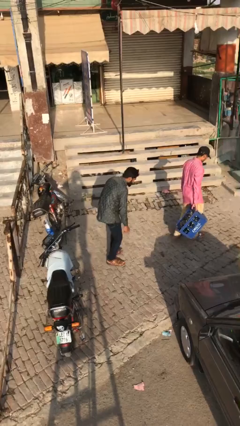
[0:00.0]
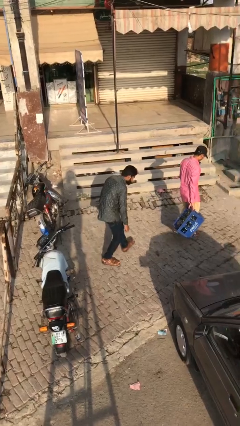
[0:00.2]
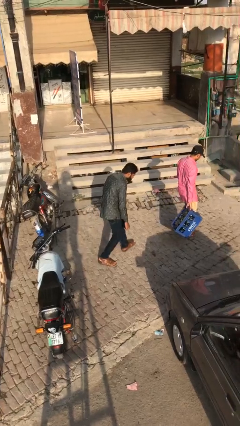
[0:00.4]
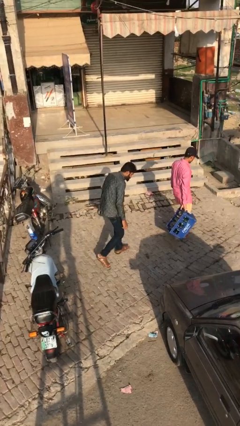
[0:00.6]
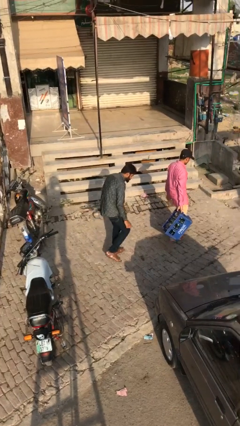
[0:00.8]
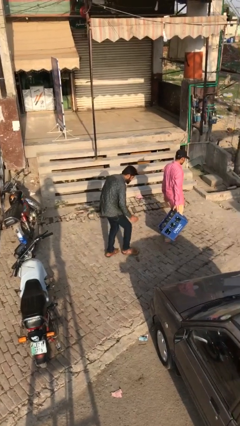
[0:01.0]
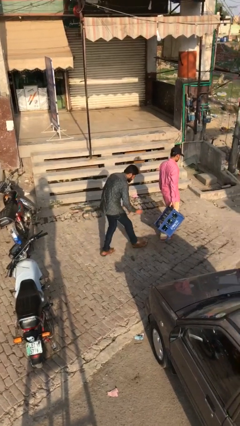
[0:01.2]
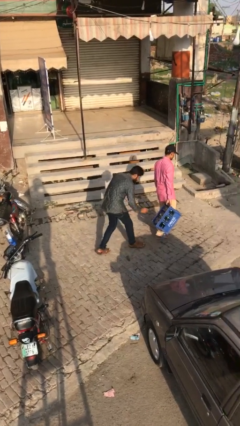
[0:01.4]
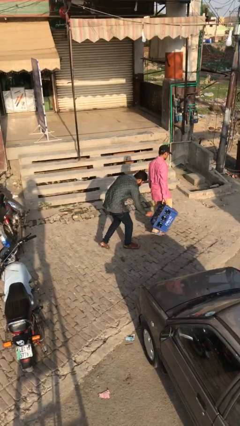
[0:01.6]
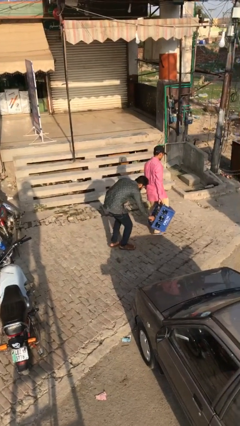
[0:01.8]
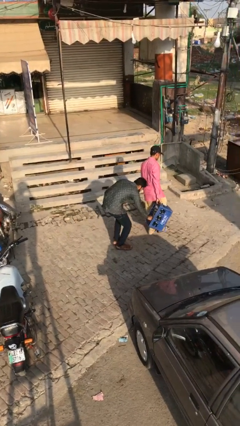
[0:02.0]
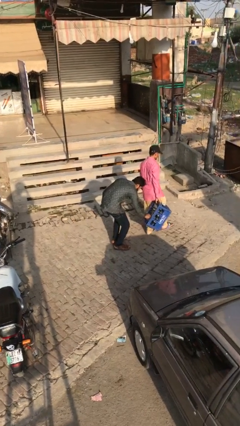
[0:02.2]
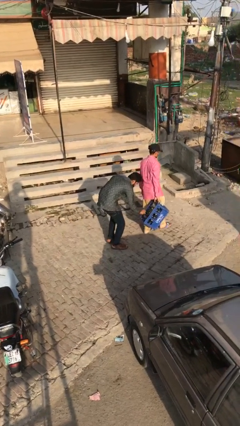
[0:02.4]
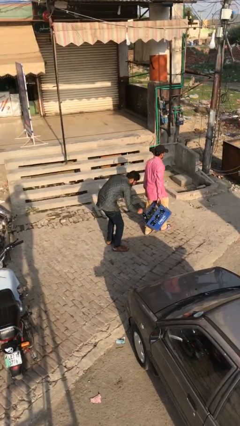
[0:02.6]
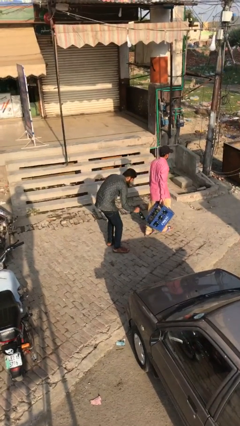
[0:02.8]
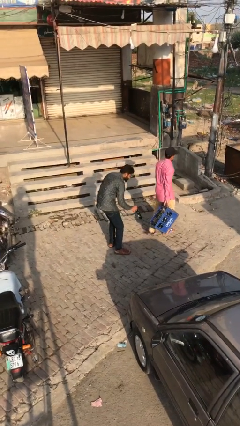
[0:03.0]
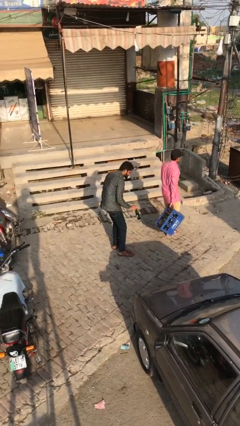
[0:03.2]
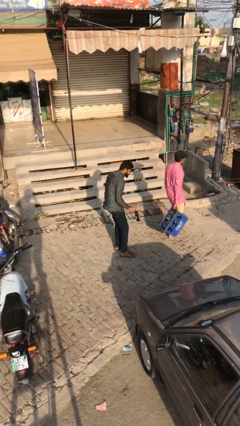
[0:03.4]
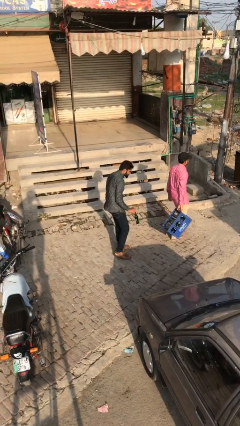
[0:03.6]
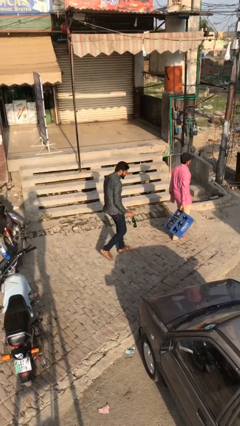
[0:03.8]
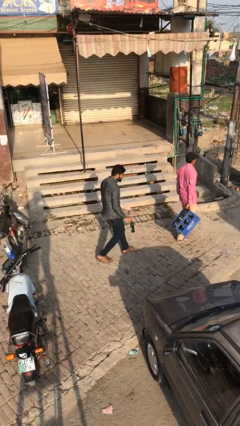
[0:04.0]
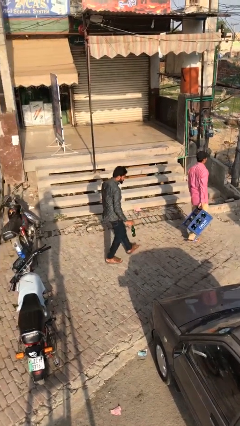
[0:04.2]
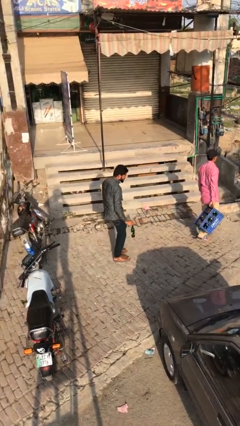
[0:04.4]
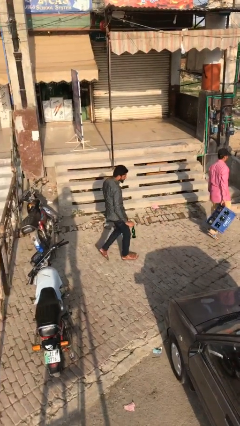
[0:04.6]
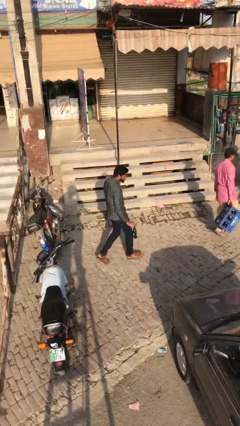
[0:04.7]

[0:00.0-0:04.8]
person steals object from person

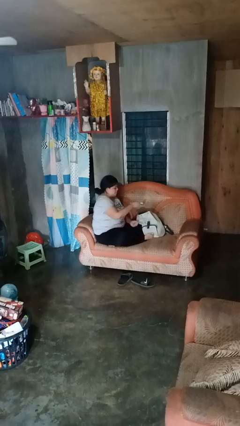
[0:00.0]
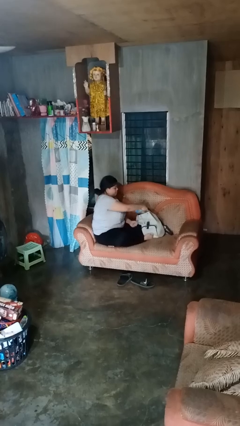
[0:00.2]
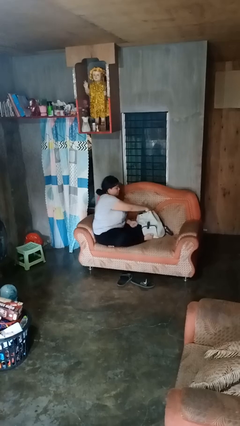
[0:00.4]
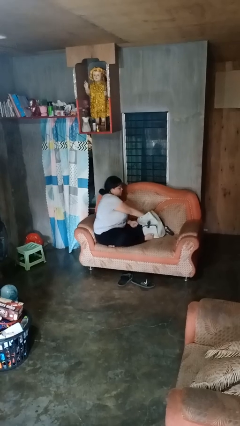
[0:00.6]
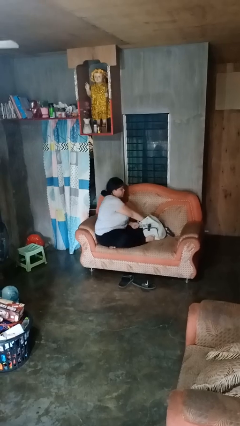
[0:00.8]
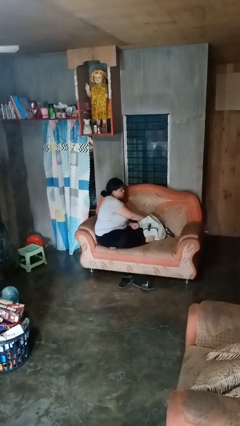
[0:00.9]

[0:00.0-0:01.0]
person puts object into backpack

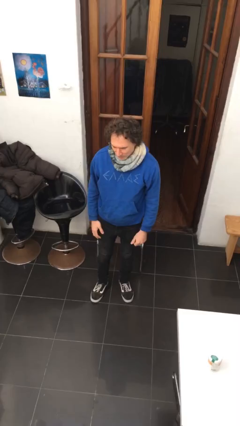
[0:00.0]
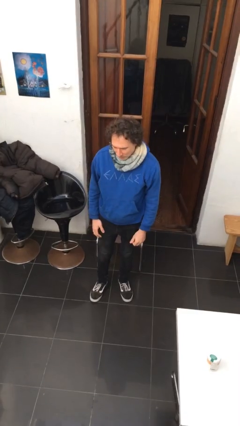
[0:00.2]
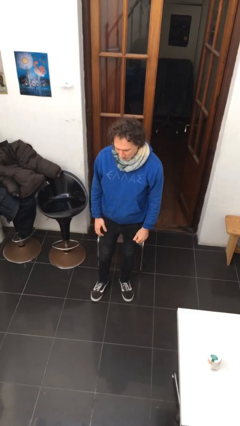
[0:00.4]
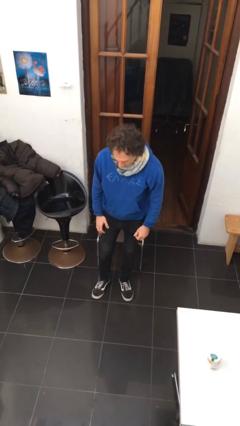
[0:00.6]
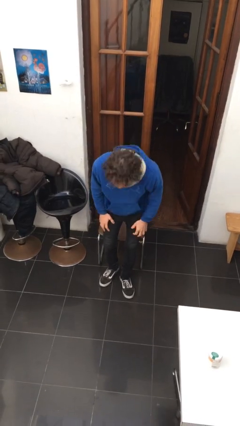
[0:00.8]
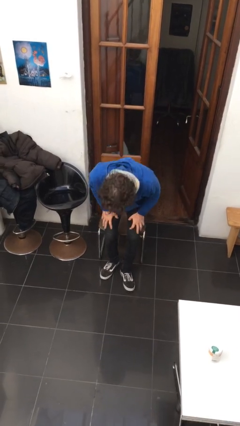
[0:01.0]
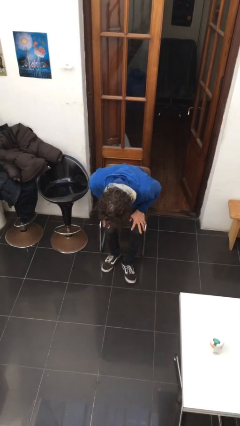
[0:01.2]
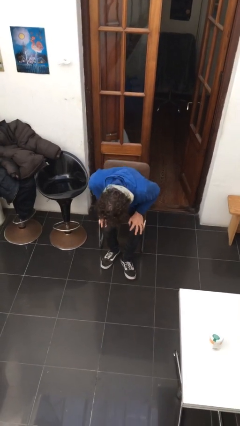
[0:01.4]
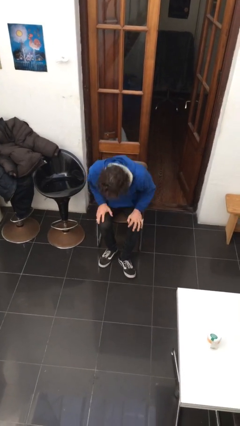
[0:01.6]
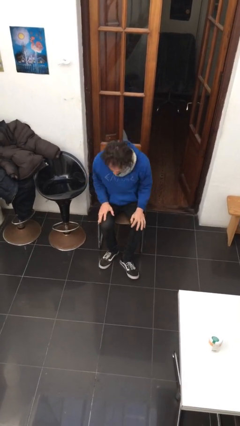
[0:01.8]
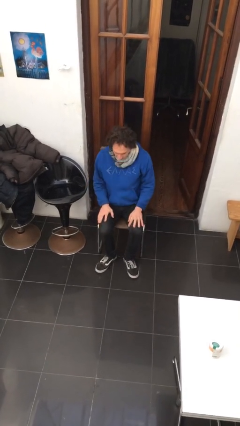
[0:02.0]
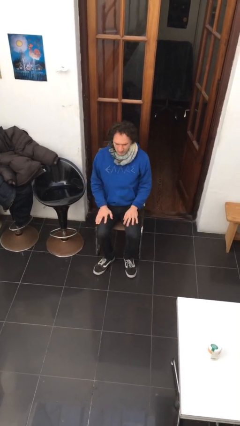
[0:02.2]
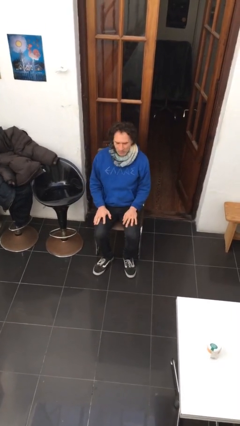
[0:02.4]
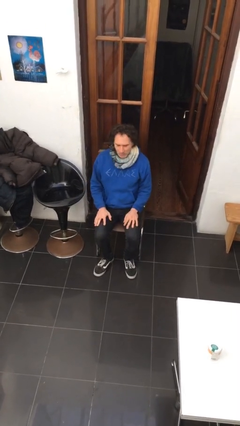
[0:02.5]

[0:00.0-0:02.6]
person sits down

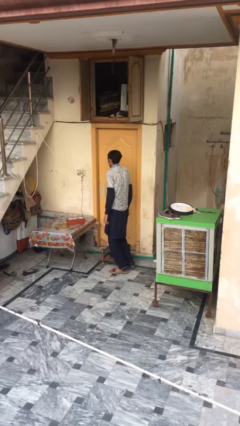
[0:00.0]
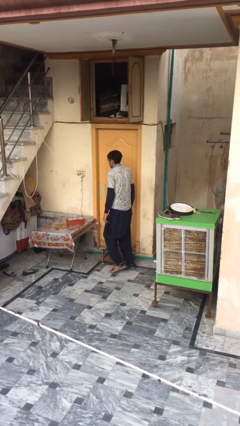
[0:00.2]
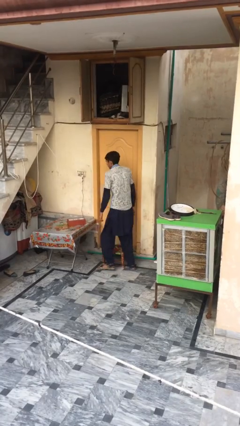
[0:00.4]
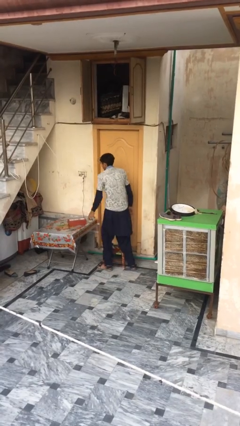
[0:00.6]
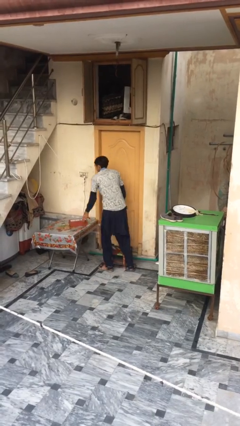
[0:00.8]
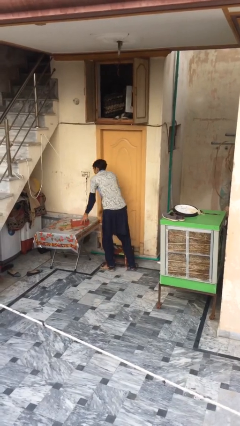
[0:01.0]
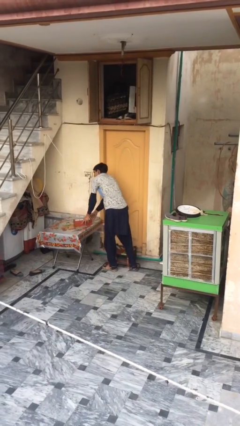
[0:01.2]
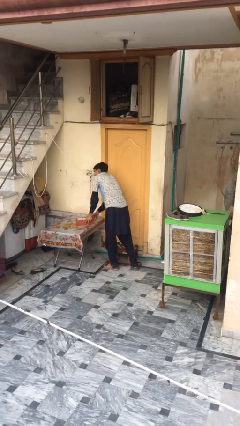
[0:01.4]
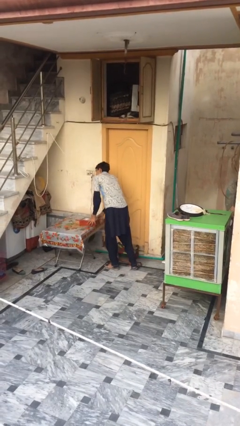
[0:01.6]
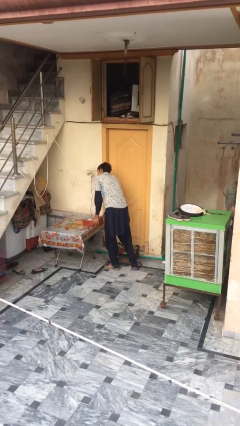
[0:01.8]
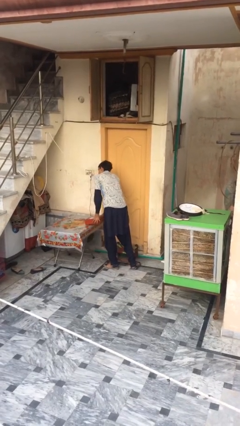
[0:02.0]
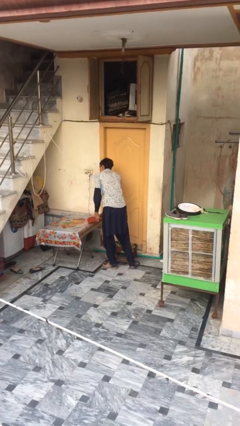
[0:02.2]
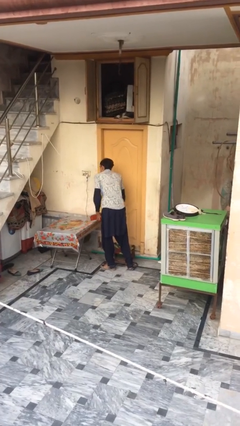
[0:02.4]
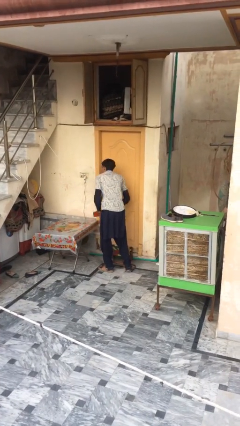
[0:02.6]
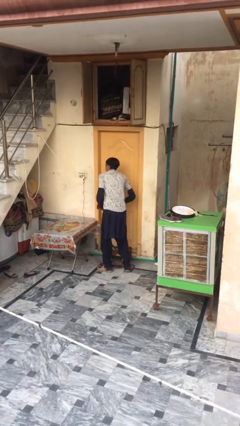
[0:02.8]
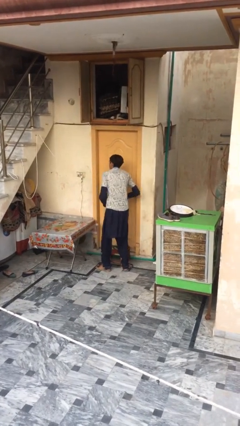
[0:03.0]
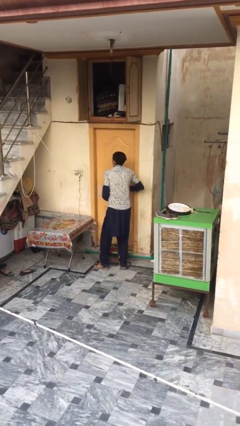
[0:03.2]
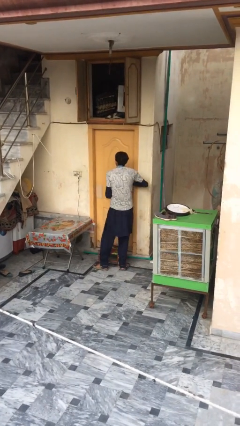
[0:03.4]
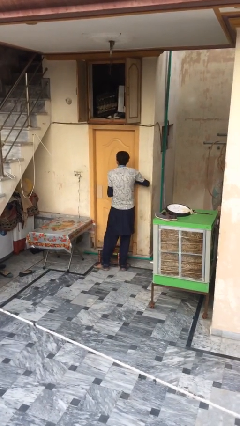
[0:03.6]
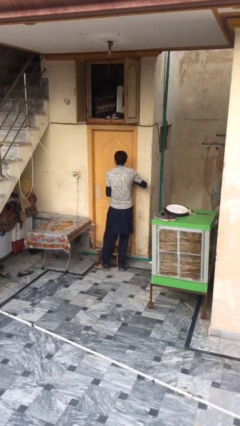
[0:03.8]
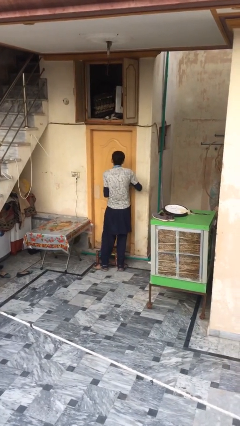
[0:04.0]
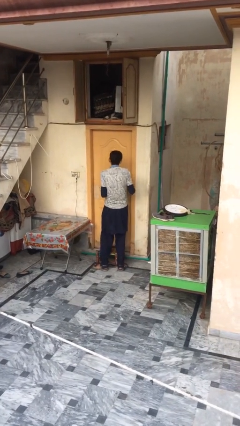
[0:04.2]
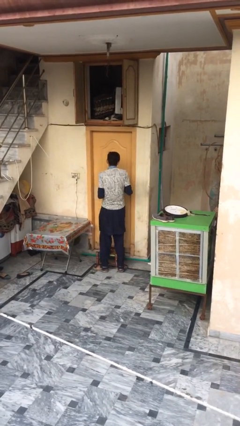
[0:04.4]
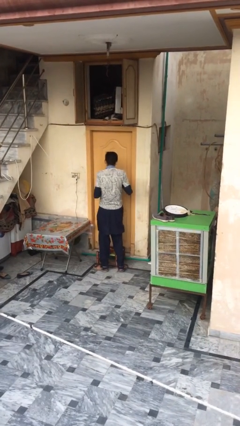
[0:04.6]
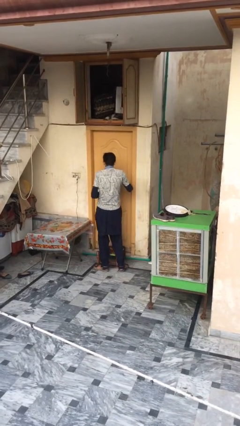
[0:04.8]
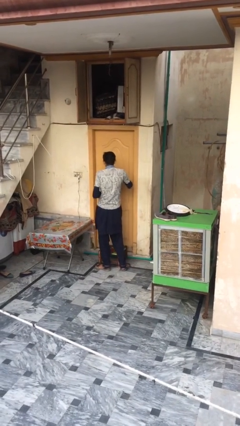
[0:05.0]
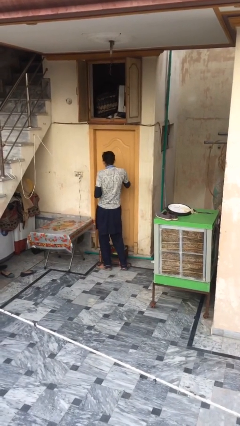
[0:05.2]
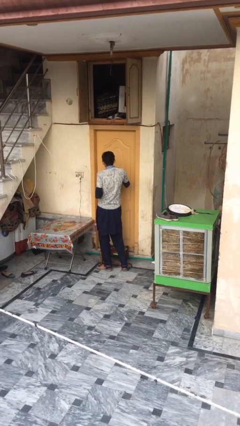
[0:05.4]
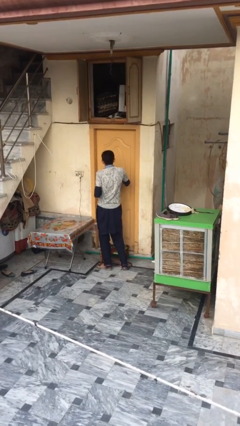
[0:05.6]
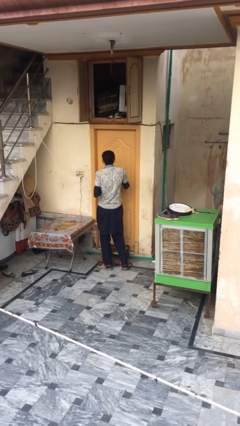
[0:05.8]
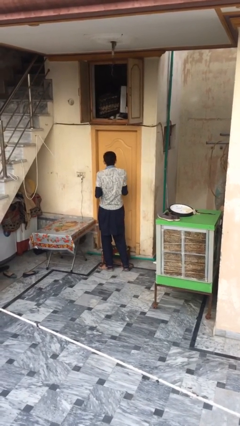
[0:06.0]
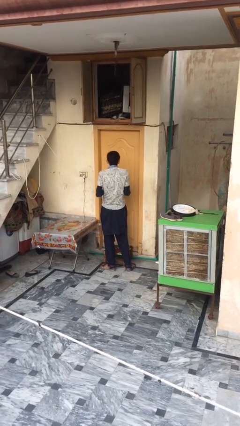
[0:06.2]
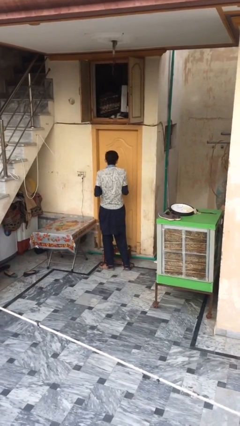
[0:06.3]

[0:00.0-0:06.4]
person picks up object from table

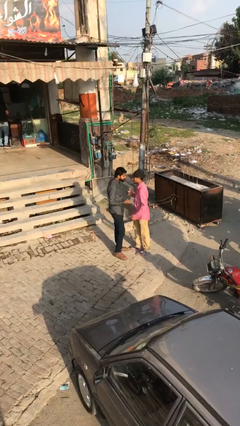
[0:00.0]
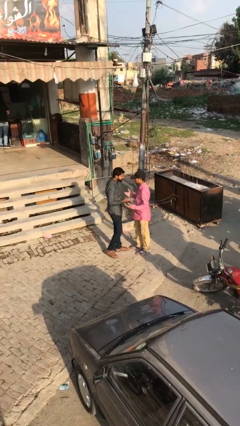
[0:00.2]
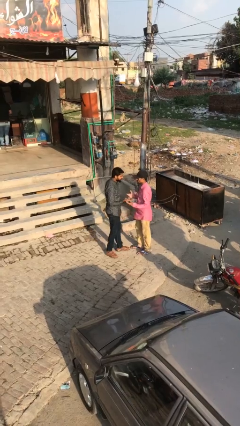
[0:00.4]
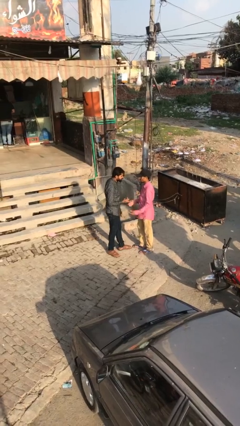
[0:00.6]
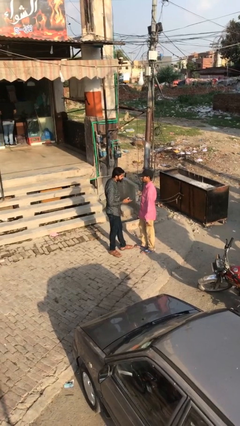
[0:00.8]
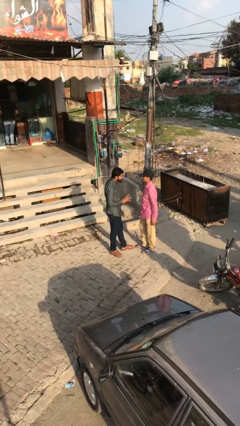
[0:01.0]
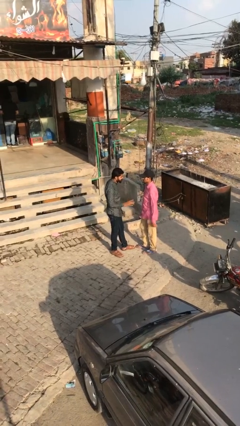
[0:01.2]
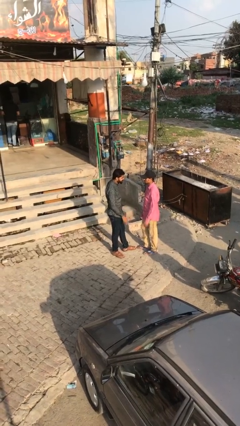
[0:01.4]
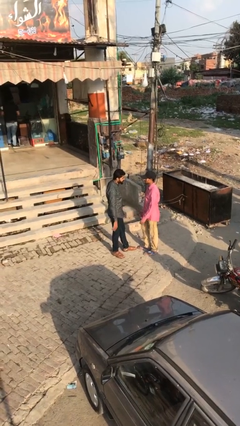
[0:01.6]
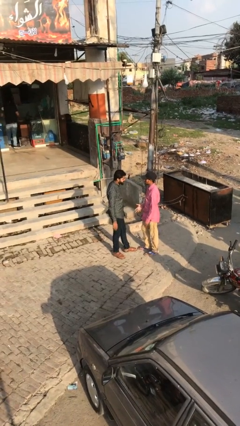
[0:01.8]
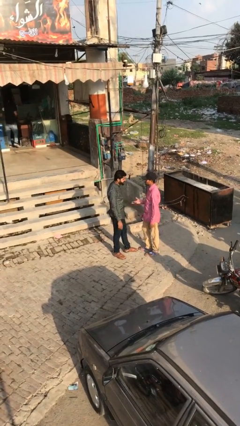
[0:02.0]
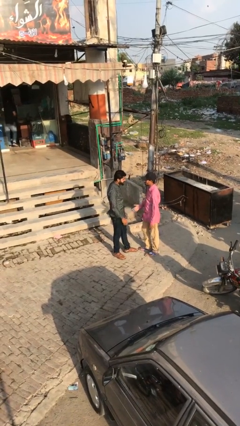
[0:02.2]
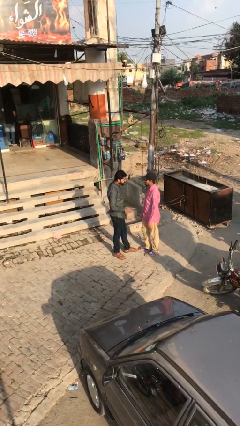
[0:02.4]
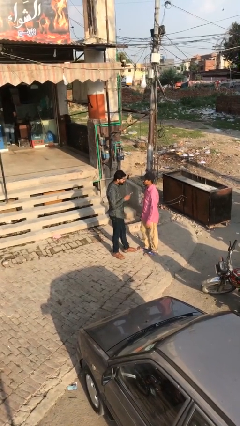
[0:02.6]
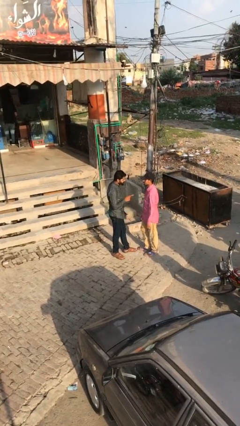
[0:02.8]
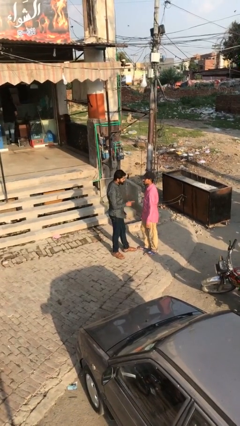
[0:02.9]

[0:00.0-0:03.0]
person talks to person
